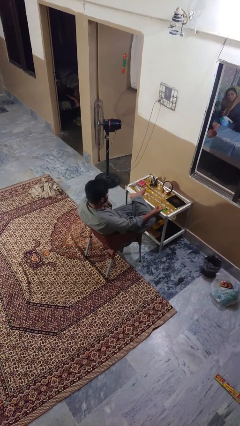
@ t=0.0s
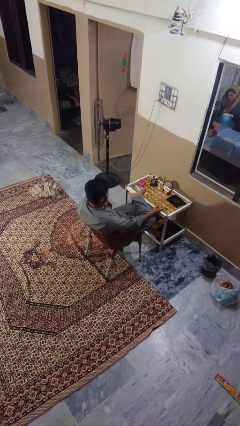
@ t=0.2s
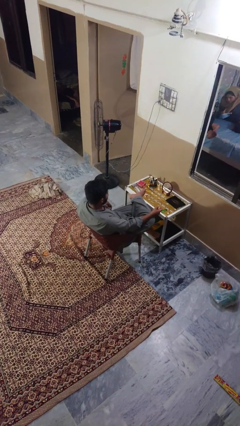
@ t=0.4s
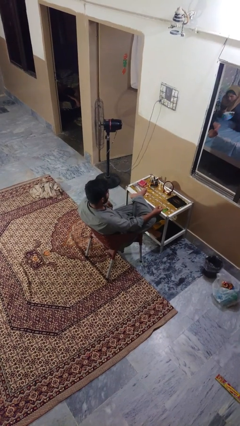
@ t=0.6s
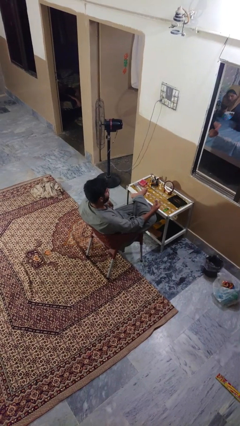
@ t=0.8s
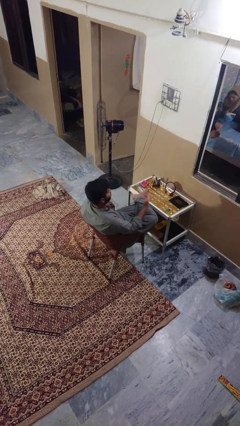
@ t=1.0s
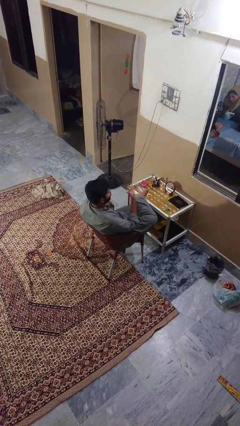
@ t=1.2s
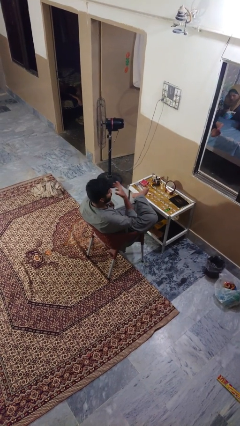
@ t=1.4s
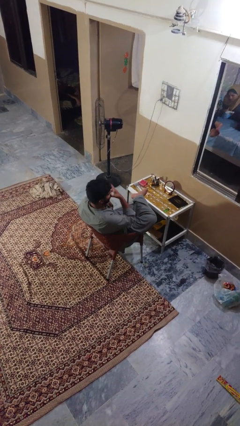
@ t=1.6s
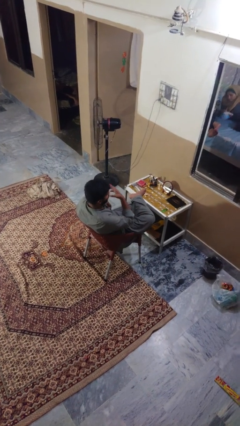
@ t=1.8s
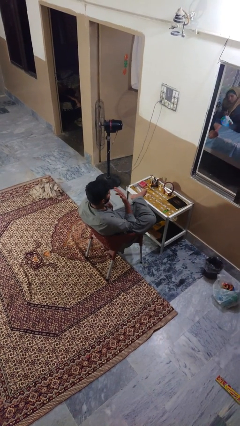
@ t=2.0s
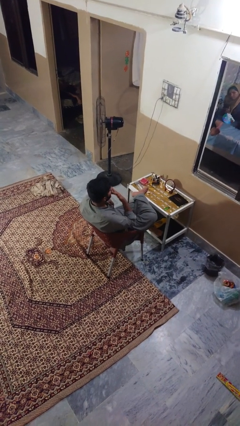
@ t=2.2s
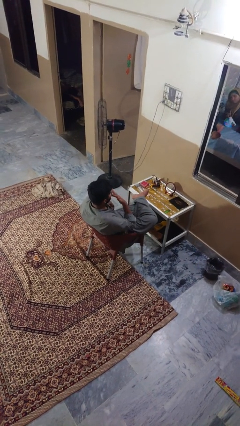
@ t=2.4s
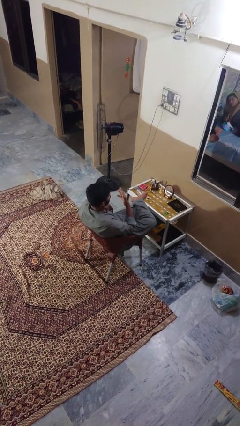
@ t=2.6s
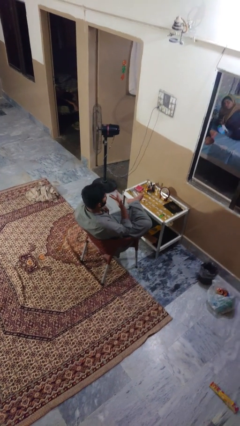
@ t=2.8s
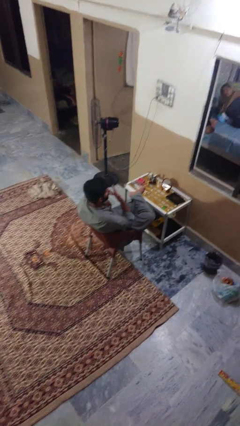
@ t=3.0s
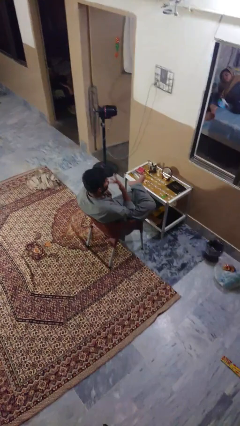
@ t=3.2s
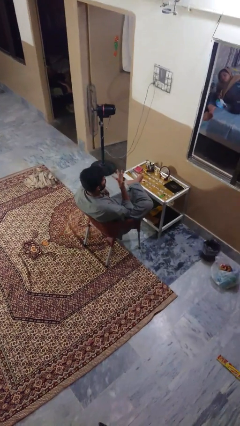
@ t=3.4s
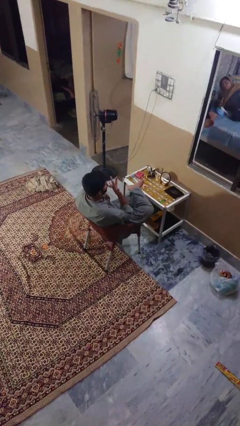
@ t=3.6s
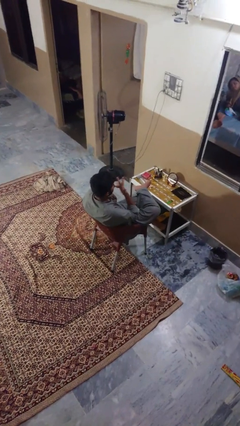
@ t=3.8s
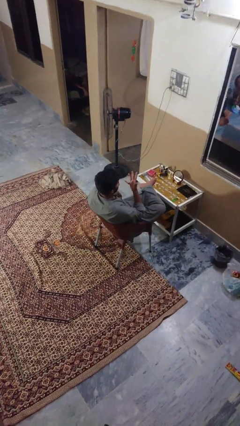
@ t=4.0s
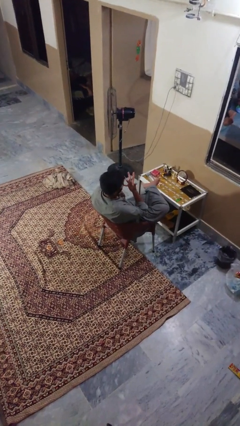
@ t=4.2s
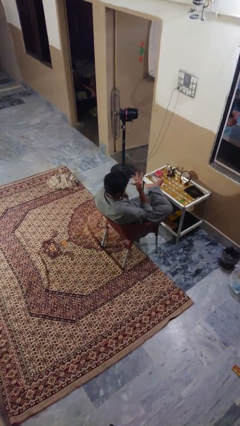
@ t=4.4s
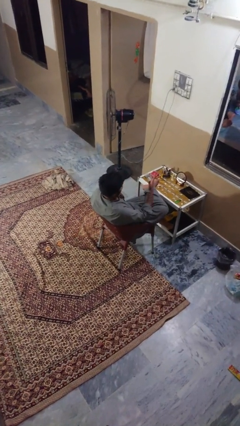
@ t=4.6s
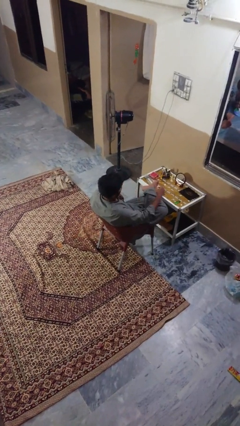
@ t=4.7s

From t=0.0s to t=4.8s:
person licks fingers

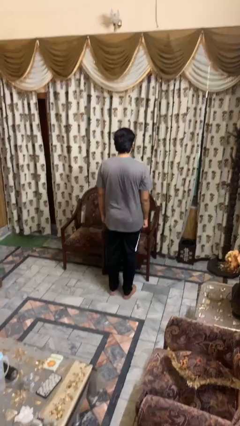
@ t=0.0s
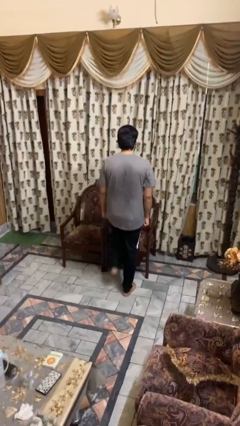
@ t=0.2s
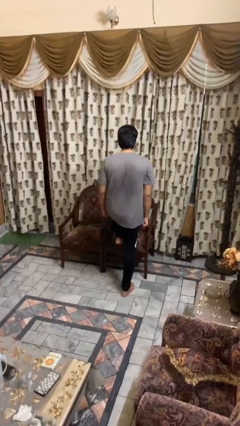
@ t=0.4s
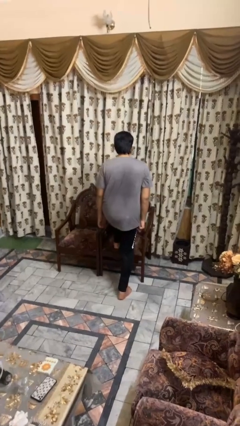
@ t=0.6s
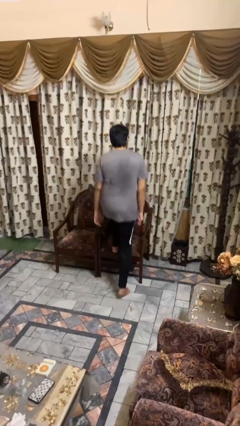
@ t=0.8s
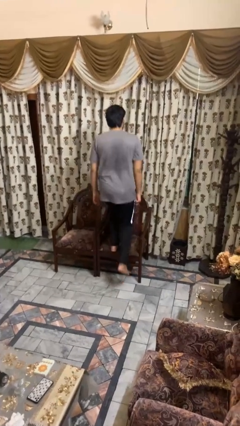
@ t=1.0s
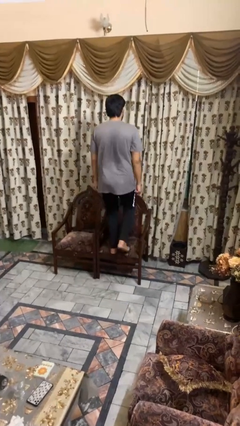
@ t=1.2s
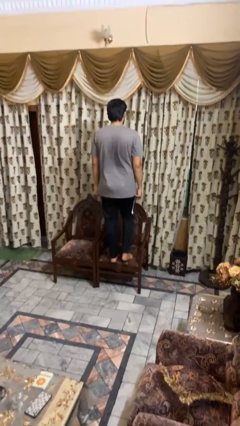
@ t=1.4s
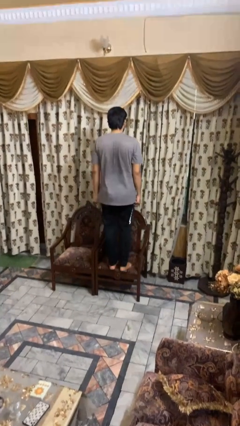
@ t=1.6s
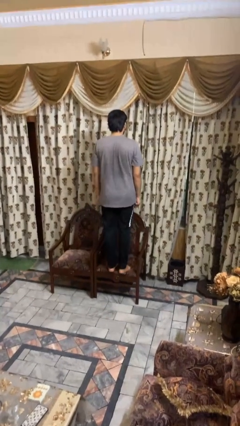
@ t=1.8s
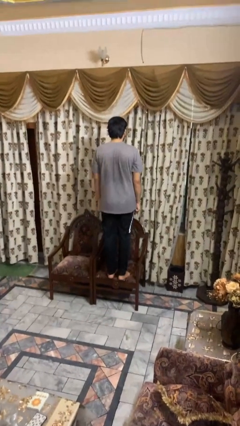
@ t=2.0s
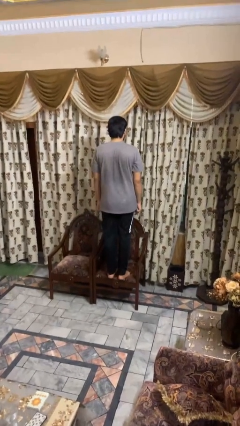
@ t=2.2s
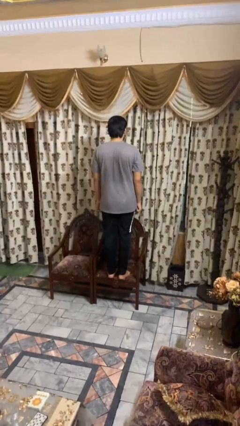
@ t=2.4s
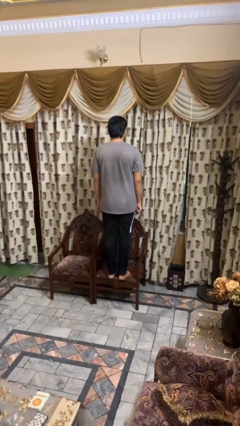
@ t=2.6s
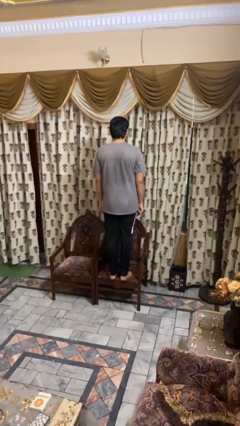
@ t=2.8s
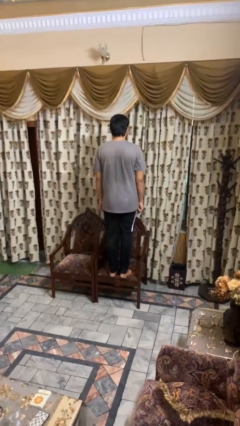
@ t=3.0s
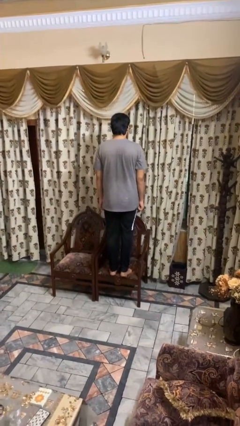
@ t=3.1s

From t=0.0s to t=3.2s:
person climbs on chair
